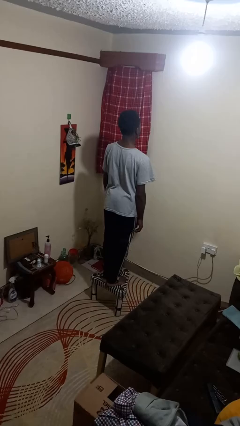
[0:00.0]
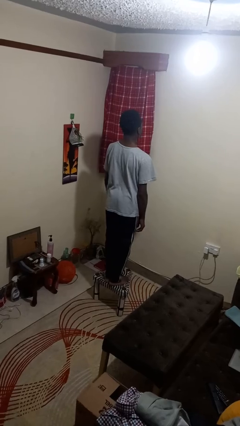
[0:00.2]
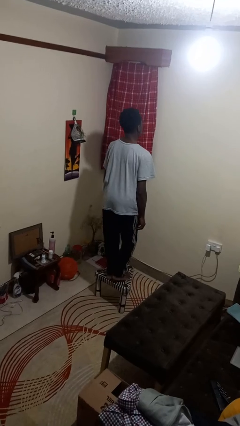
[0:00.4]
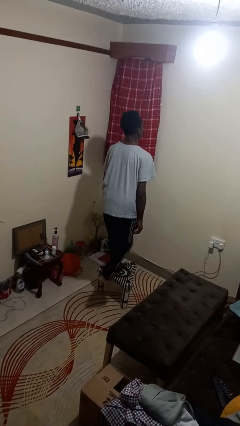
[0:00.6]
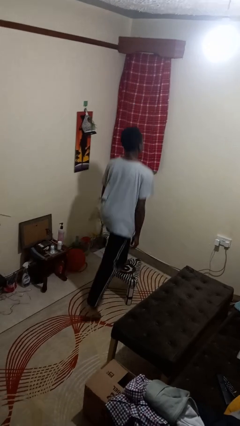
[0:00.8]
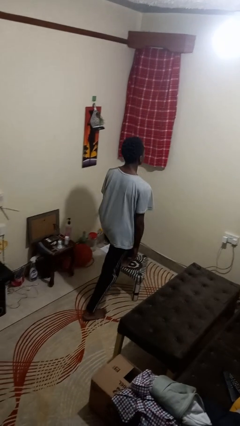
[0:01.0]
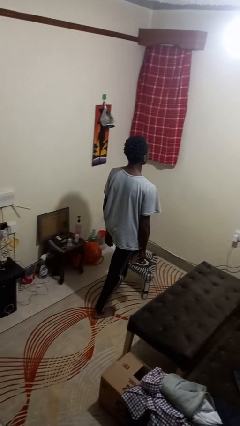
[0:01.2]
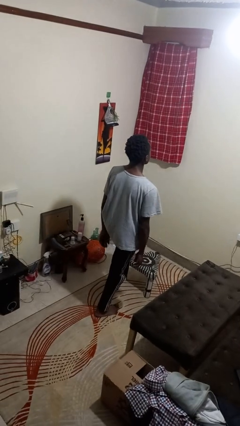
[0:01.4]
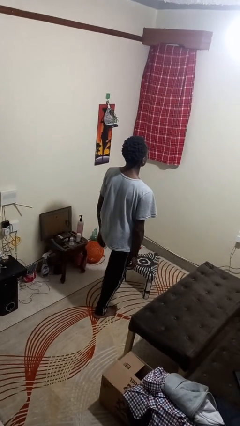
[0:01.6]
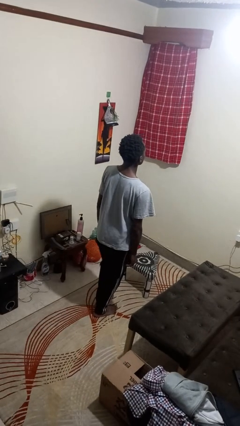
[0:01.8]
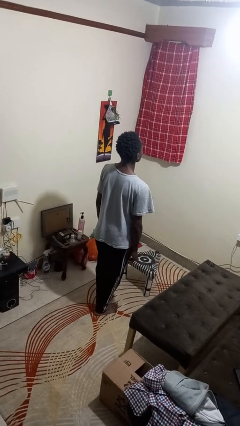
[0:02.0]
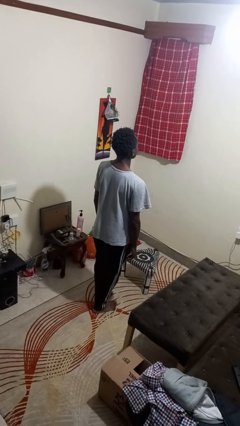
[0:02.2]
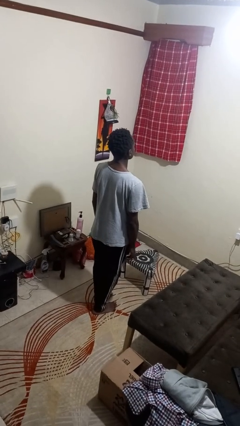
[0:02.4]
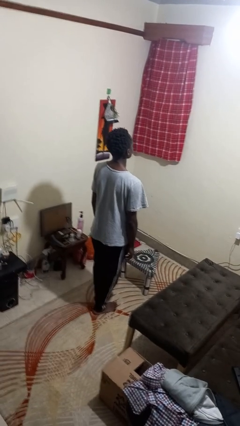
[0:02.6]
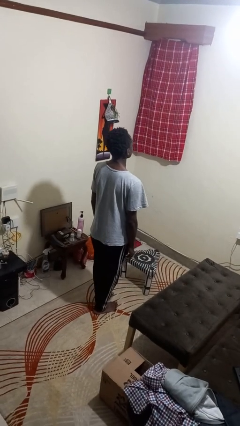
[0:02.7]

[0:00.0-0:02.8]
person climbs off chair

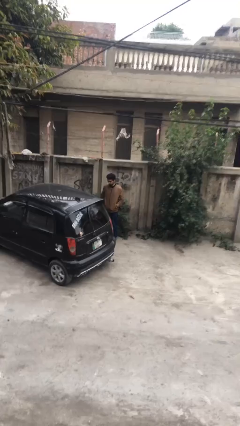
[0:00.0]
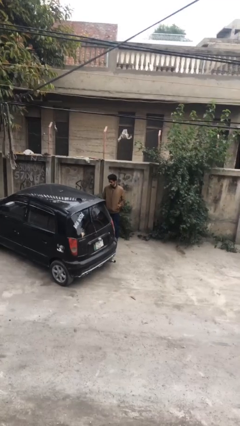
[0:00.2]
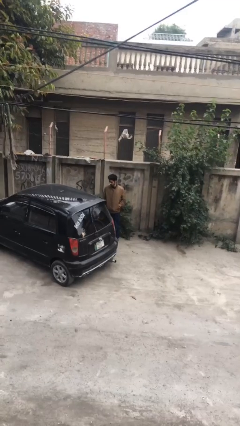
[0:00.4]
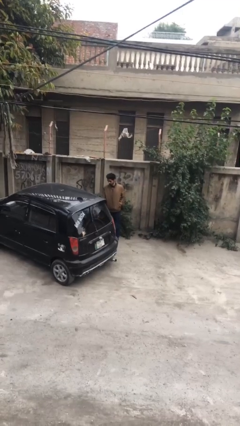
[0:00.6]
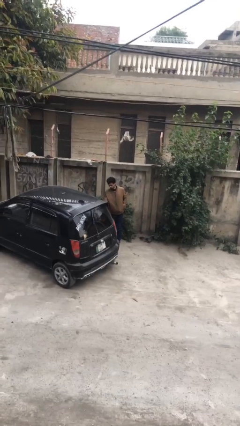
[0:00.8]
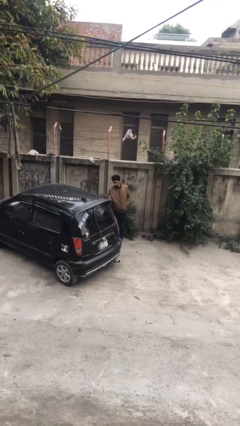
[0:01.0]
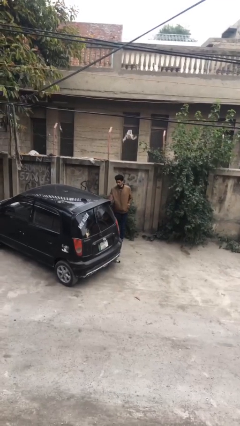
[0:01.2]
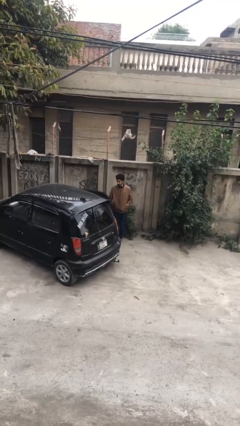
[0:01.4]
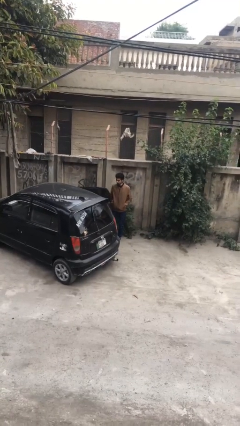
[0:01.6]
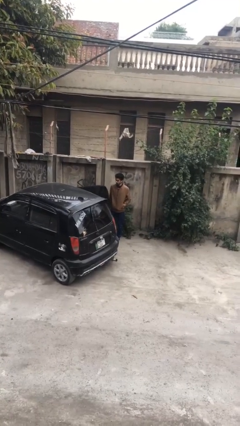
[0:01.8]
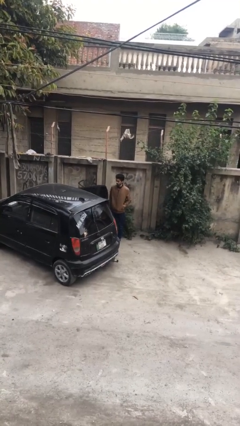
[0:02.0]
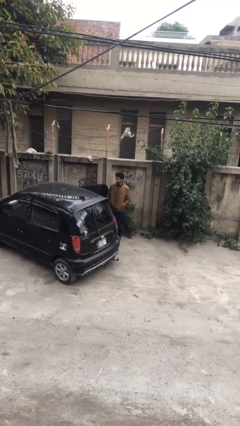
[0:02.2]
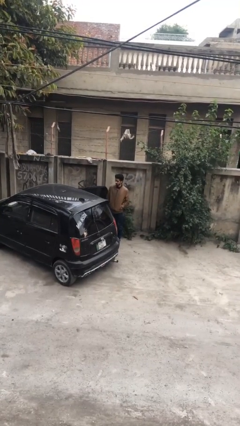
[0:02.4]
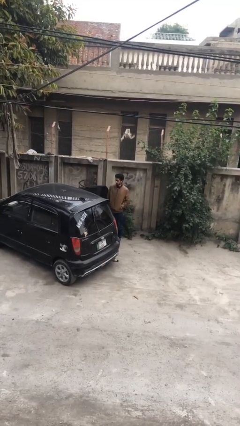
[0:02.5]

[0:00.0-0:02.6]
person opens car door

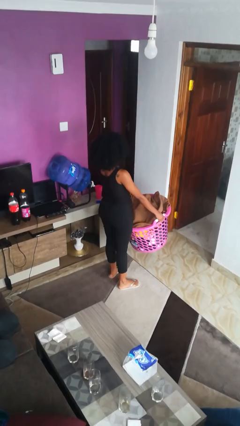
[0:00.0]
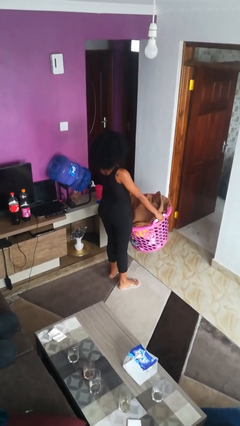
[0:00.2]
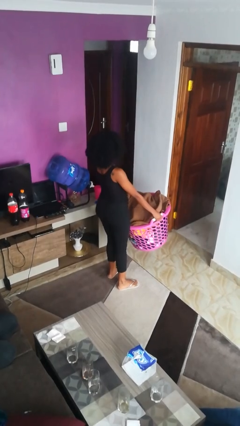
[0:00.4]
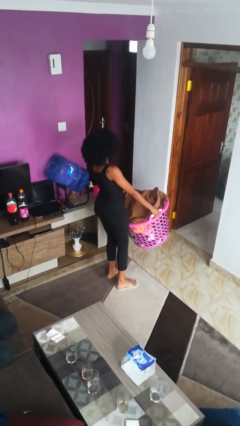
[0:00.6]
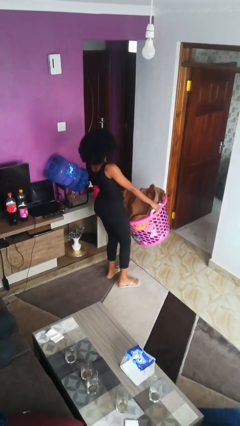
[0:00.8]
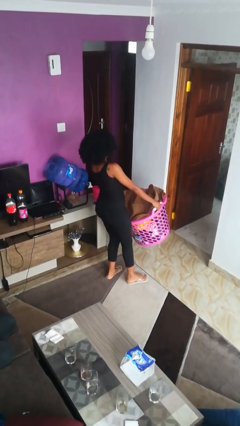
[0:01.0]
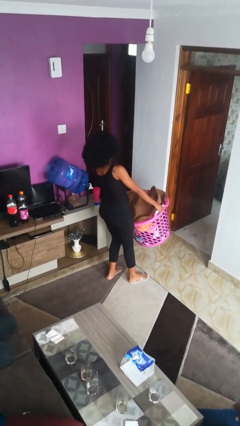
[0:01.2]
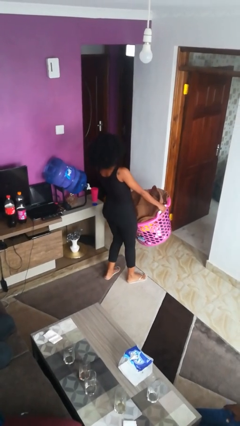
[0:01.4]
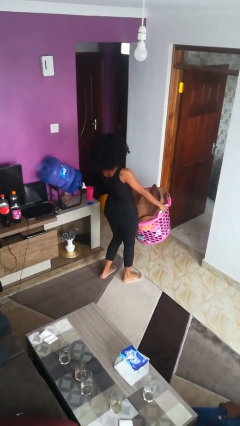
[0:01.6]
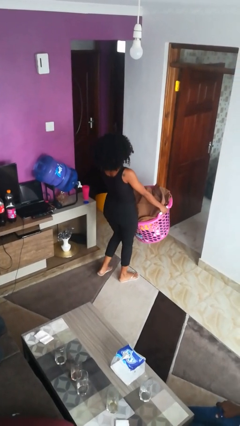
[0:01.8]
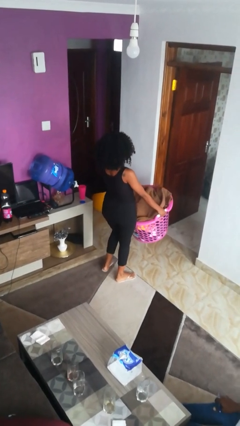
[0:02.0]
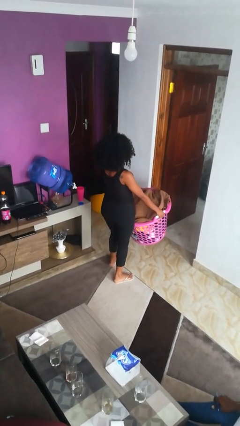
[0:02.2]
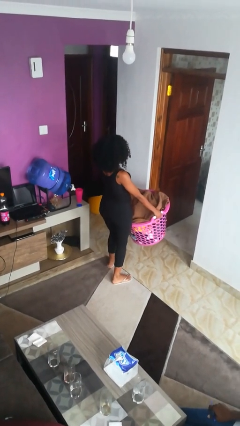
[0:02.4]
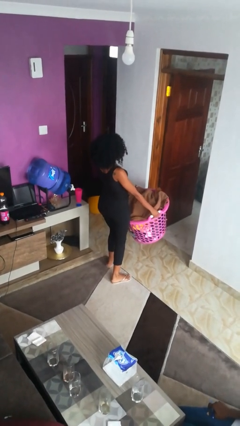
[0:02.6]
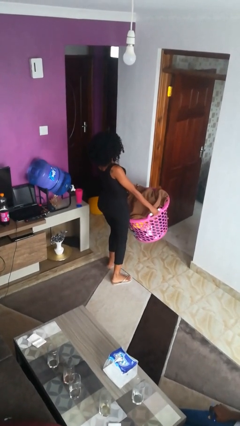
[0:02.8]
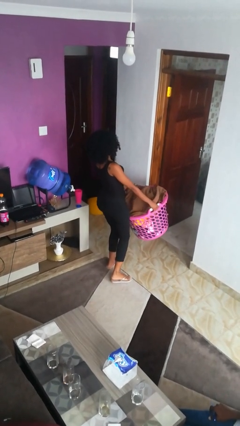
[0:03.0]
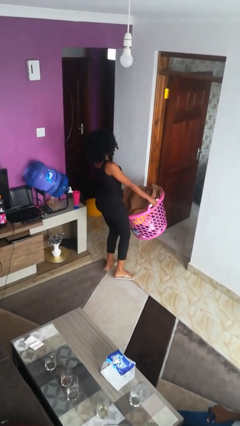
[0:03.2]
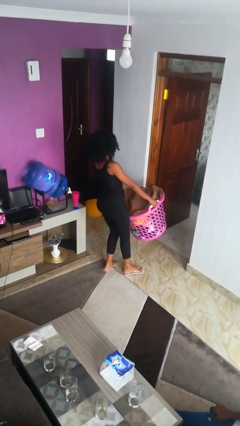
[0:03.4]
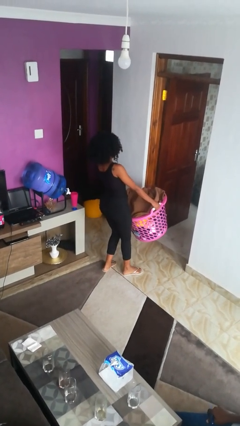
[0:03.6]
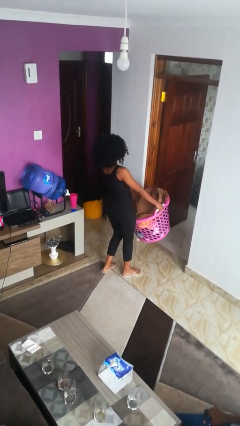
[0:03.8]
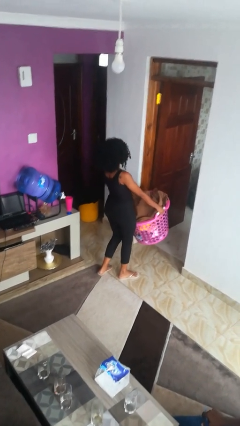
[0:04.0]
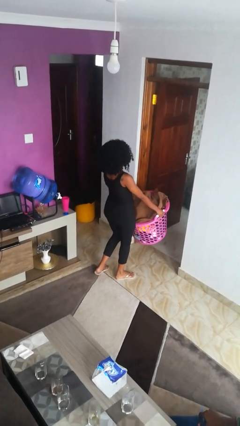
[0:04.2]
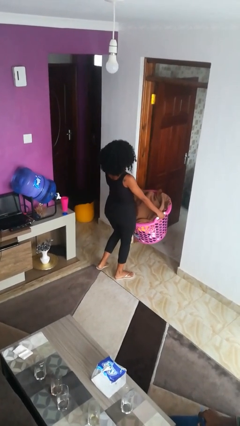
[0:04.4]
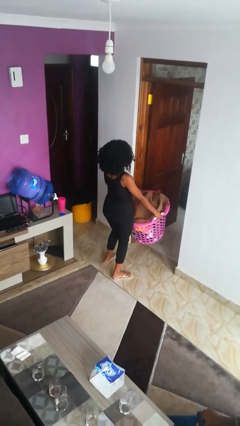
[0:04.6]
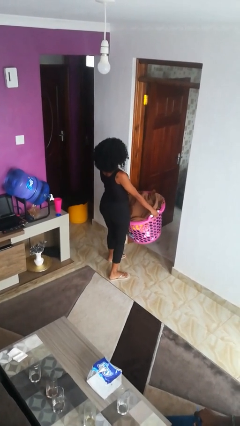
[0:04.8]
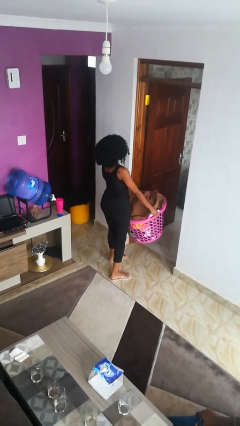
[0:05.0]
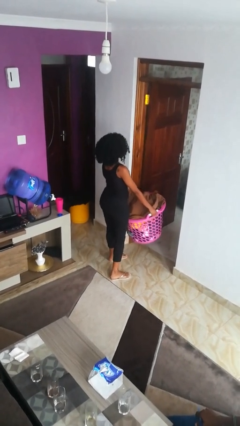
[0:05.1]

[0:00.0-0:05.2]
person carries laundry basket

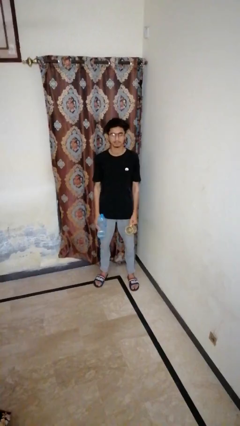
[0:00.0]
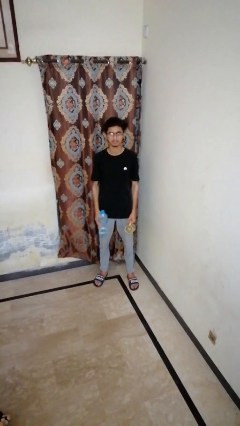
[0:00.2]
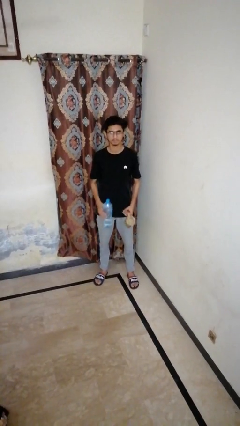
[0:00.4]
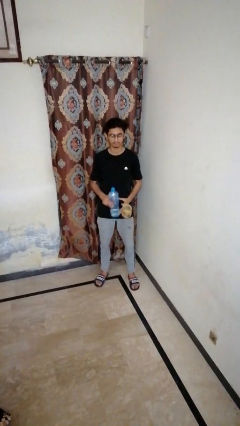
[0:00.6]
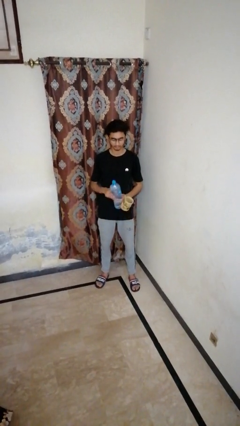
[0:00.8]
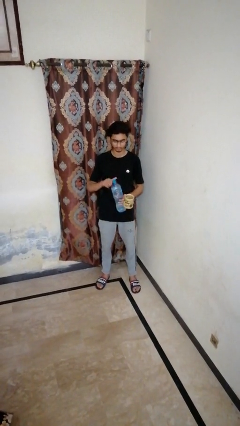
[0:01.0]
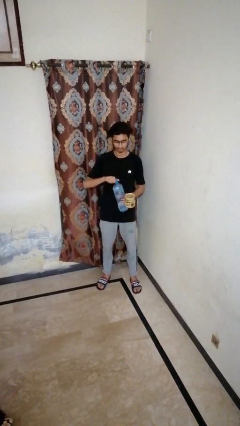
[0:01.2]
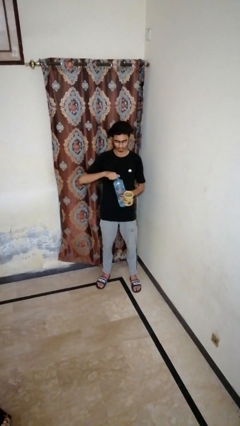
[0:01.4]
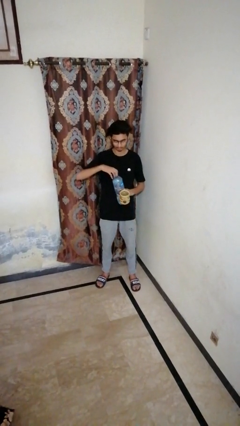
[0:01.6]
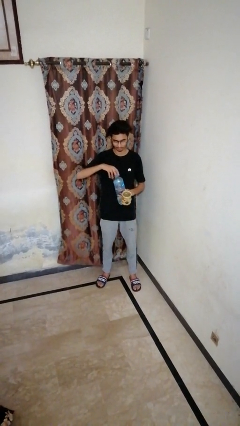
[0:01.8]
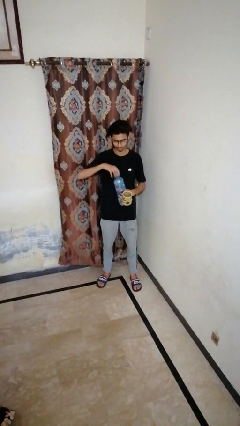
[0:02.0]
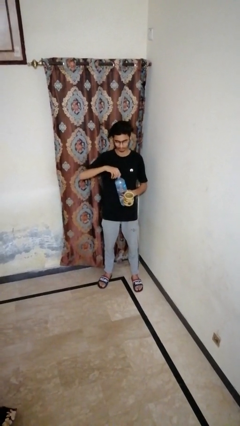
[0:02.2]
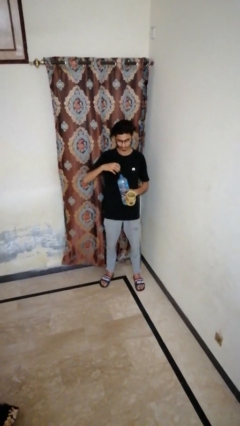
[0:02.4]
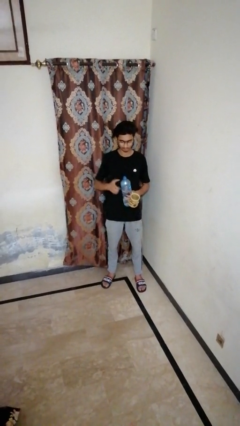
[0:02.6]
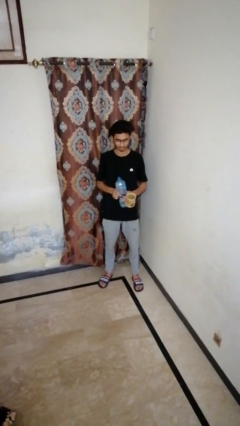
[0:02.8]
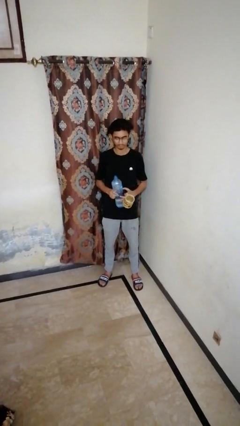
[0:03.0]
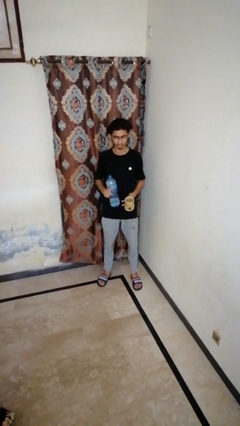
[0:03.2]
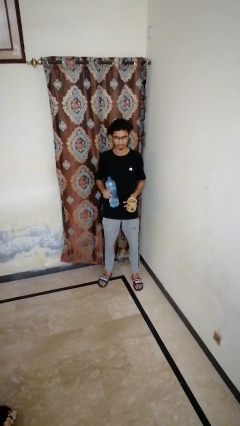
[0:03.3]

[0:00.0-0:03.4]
person unscrews lid from bottle

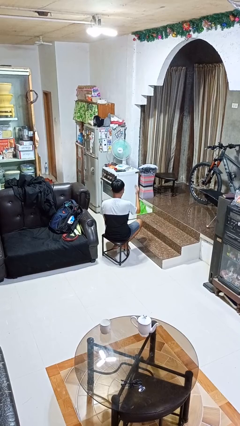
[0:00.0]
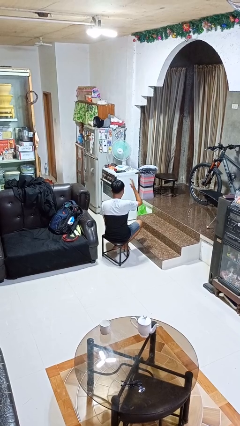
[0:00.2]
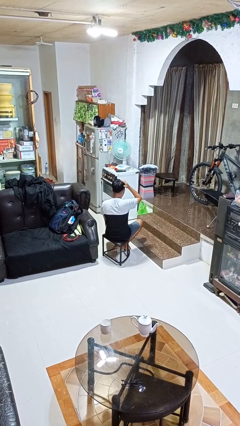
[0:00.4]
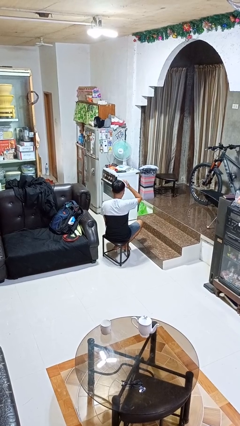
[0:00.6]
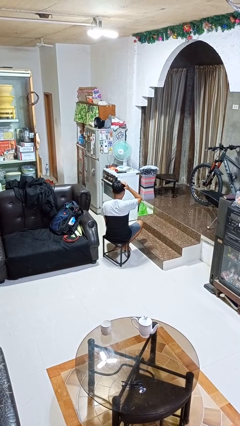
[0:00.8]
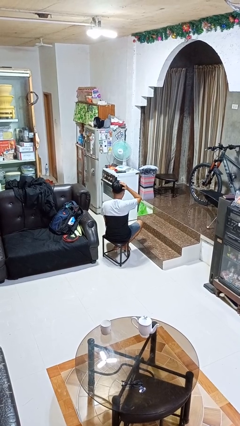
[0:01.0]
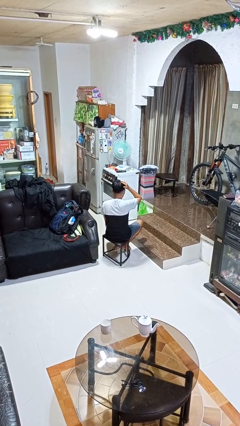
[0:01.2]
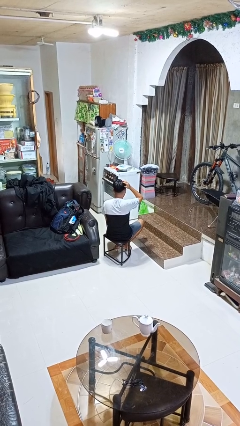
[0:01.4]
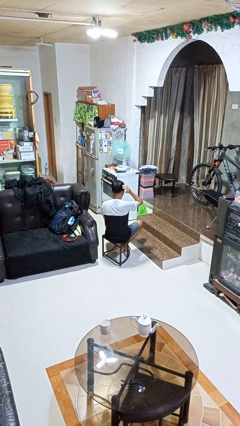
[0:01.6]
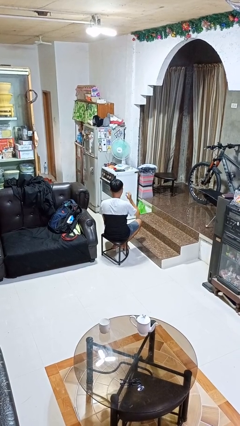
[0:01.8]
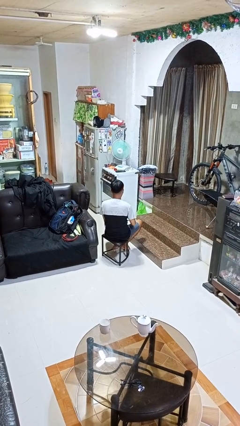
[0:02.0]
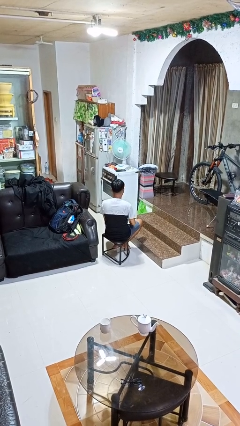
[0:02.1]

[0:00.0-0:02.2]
person pats head

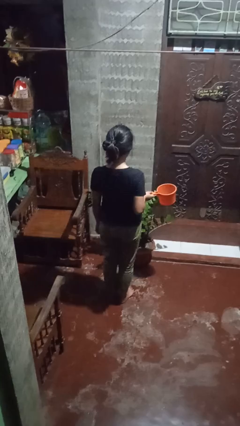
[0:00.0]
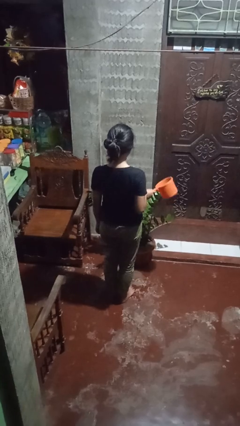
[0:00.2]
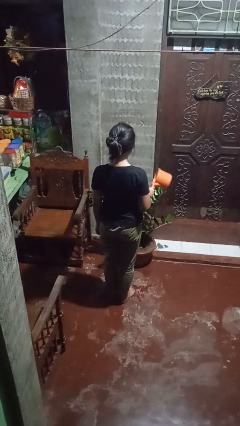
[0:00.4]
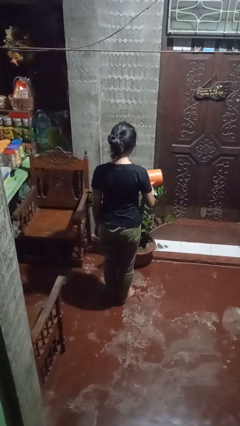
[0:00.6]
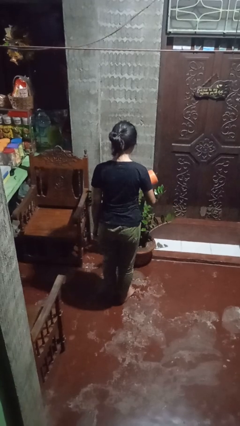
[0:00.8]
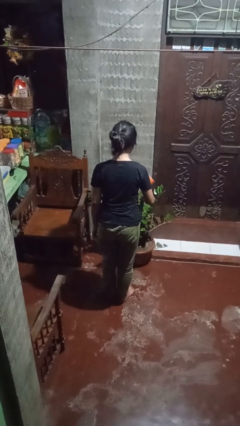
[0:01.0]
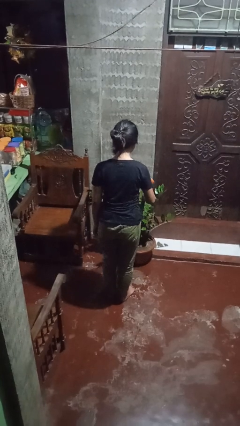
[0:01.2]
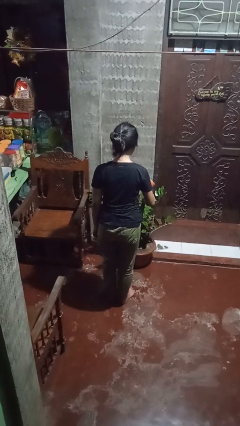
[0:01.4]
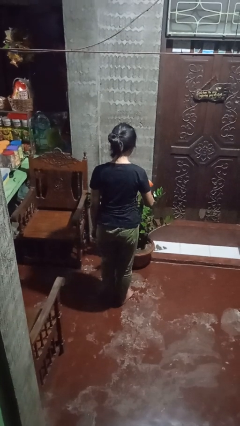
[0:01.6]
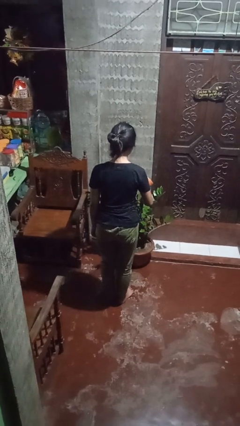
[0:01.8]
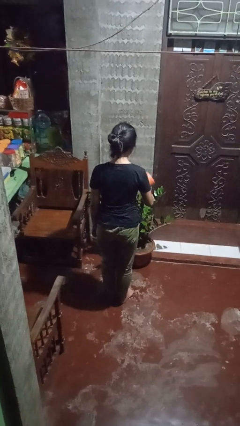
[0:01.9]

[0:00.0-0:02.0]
person waters houseplant
